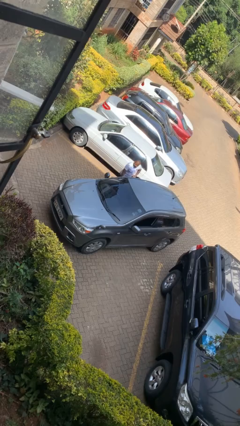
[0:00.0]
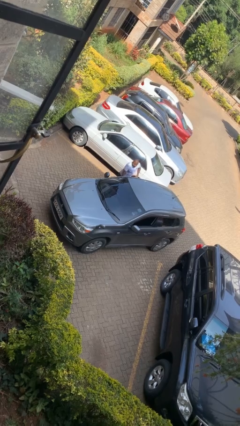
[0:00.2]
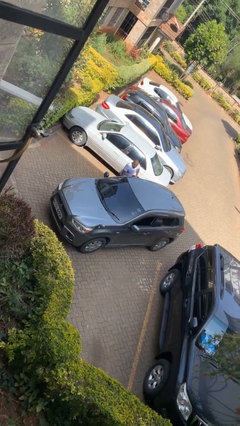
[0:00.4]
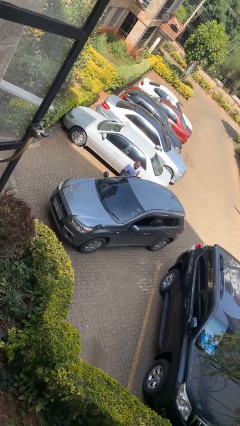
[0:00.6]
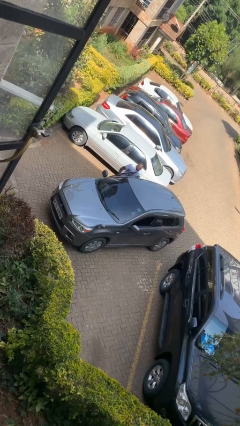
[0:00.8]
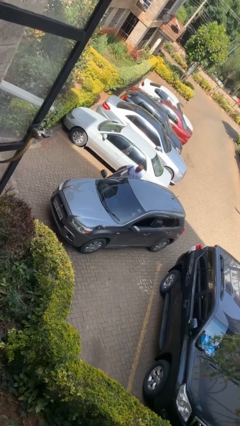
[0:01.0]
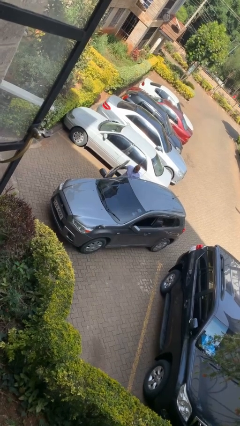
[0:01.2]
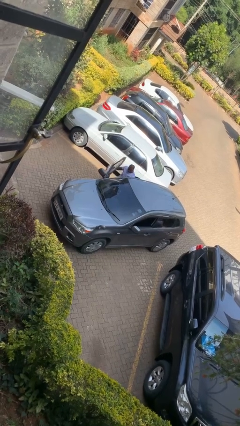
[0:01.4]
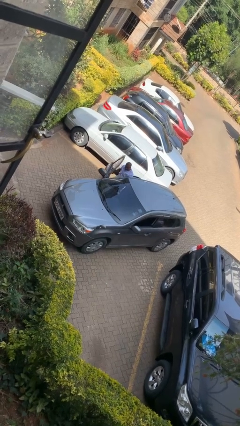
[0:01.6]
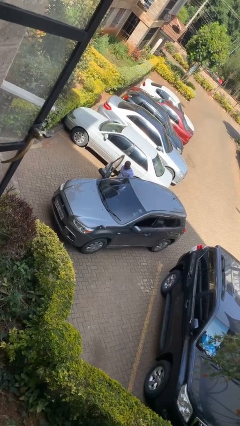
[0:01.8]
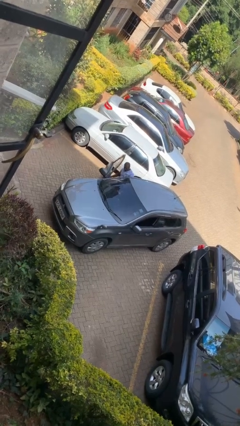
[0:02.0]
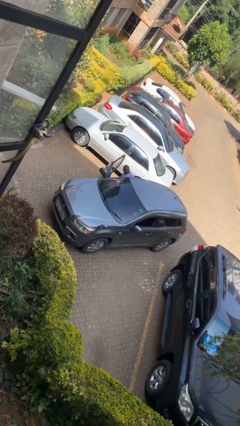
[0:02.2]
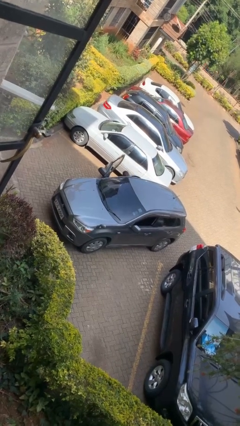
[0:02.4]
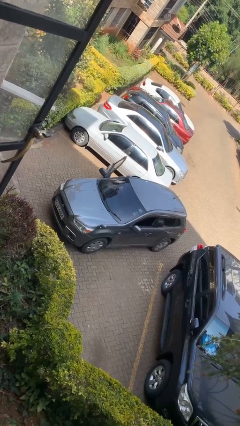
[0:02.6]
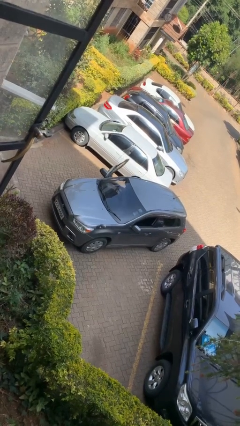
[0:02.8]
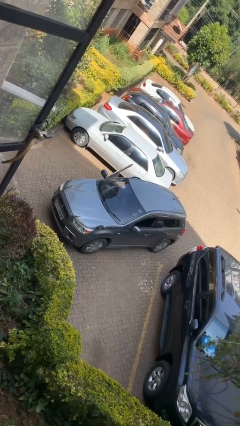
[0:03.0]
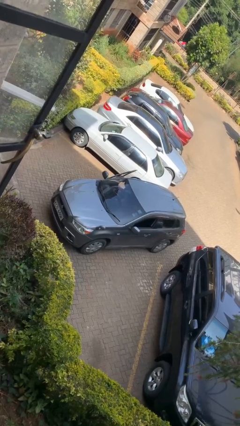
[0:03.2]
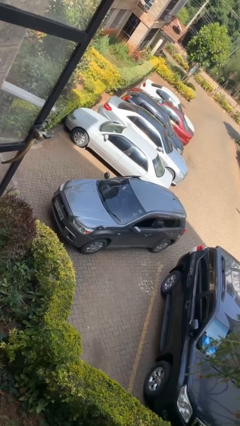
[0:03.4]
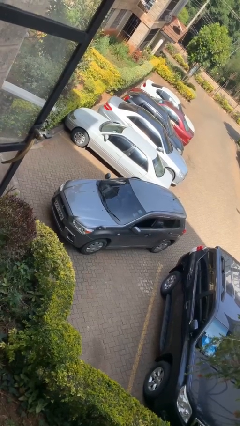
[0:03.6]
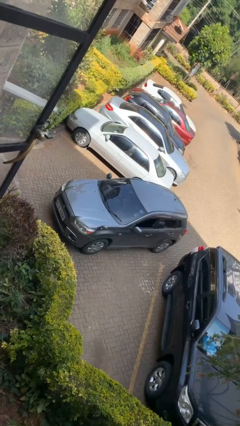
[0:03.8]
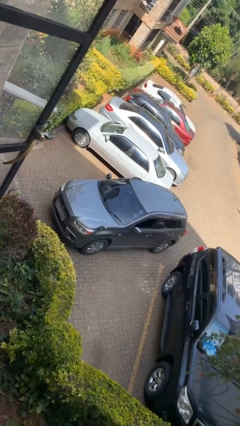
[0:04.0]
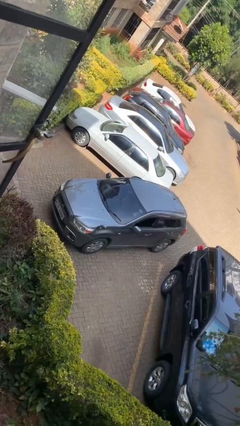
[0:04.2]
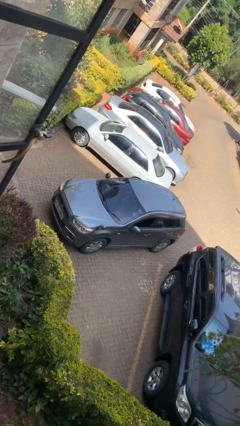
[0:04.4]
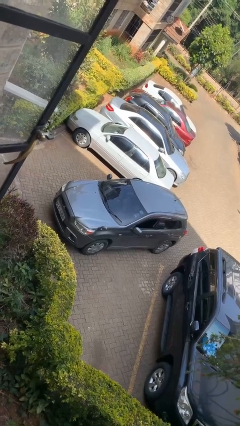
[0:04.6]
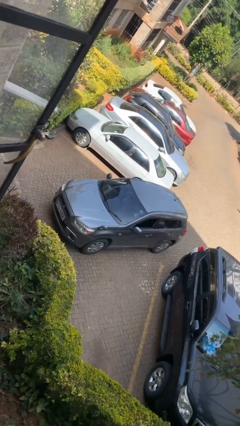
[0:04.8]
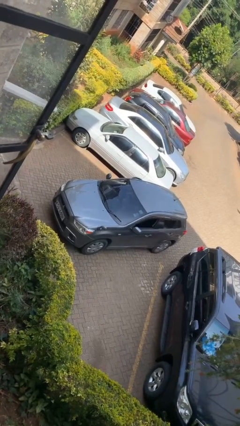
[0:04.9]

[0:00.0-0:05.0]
car picks up person

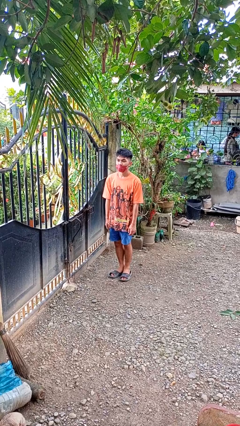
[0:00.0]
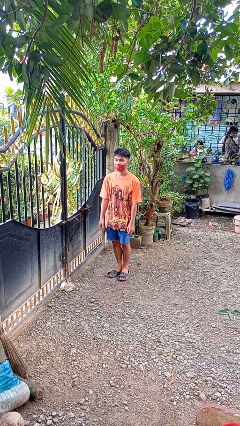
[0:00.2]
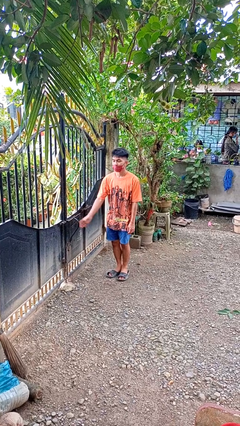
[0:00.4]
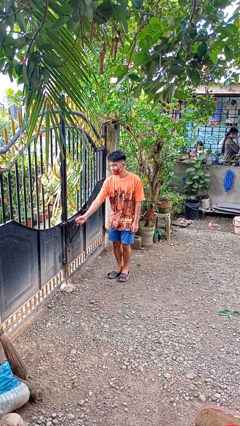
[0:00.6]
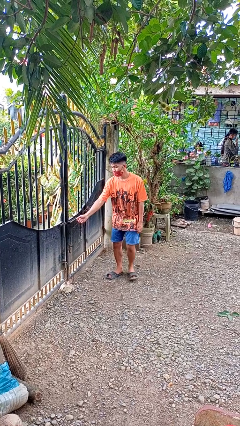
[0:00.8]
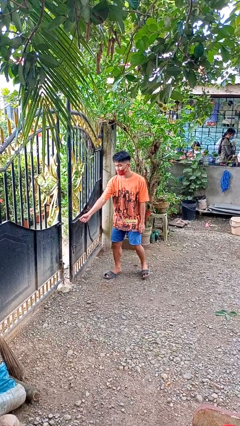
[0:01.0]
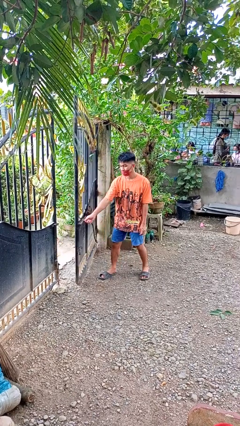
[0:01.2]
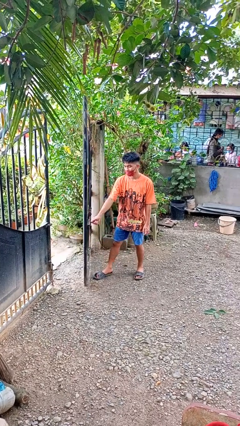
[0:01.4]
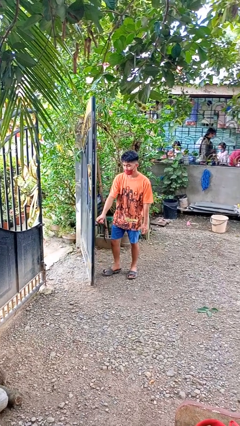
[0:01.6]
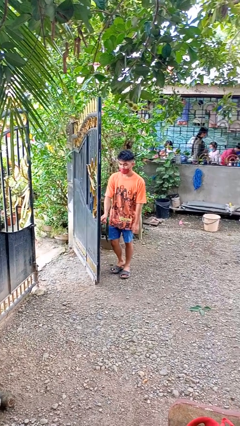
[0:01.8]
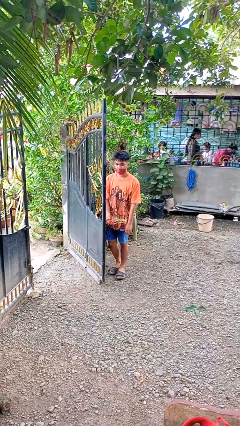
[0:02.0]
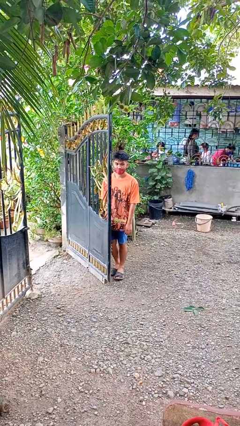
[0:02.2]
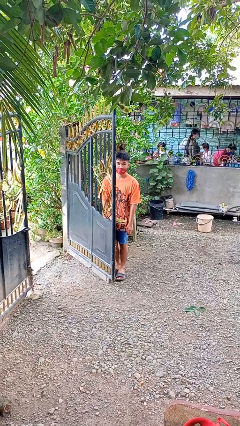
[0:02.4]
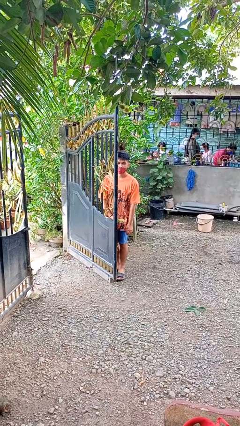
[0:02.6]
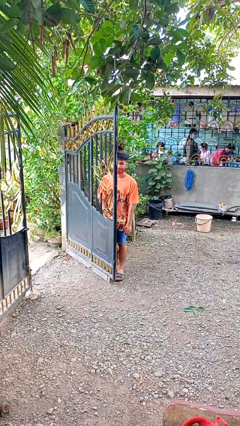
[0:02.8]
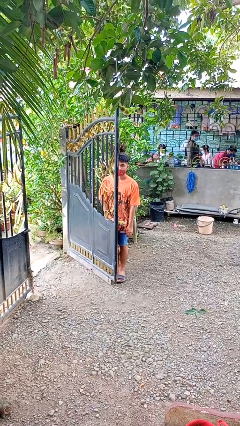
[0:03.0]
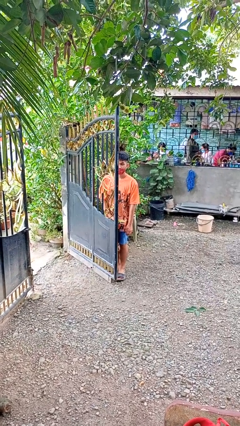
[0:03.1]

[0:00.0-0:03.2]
person opens gate

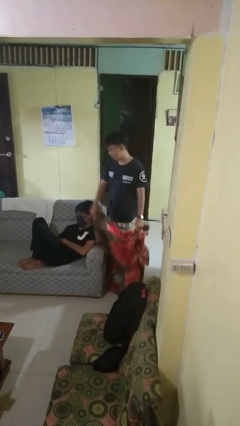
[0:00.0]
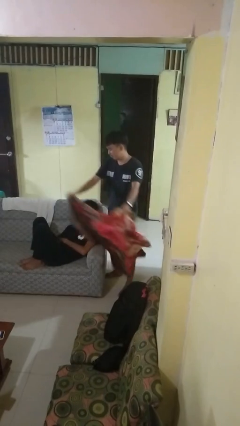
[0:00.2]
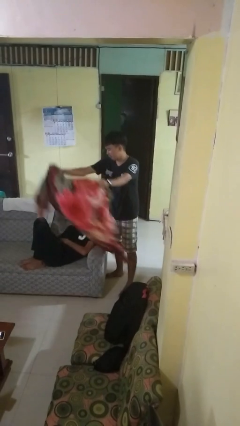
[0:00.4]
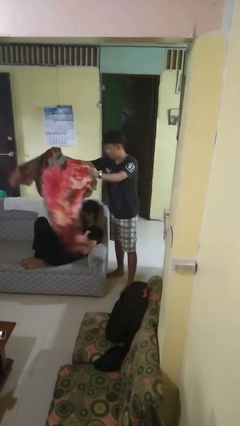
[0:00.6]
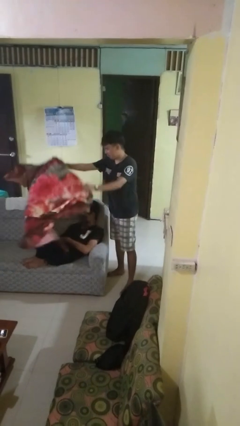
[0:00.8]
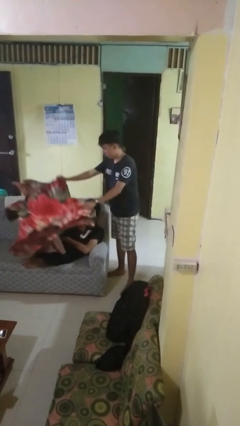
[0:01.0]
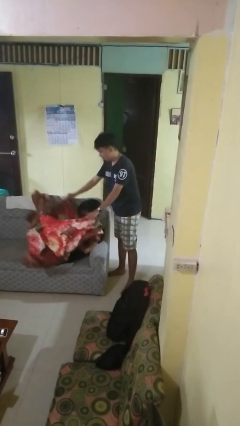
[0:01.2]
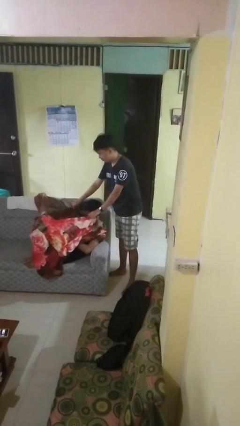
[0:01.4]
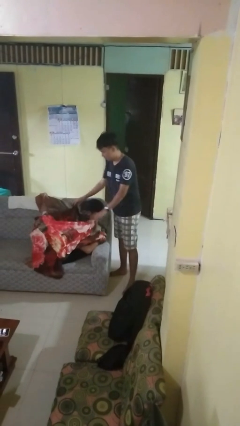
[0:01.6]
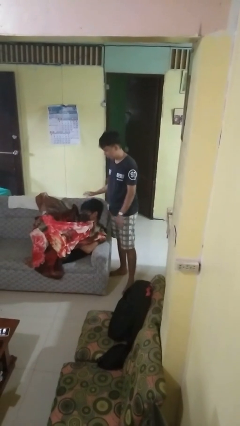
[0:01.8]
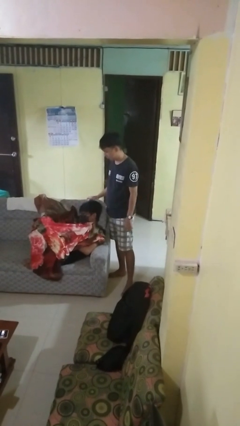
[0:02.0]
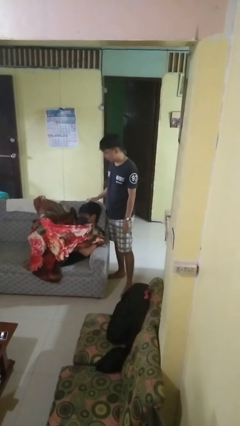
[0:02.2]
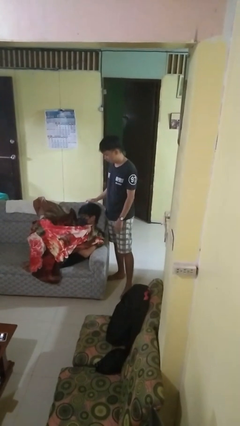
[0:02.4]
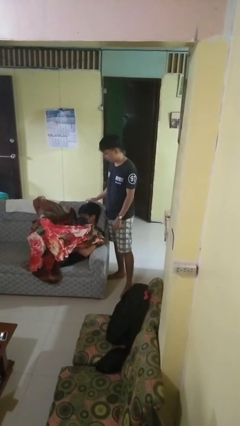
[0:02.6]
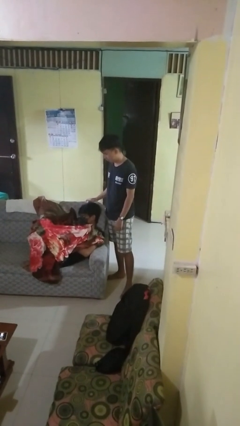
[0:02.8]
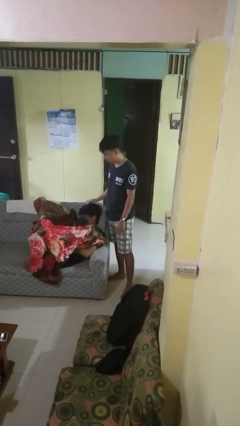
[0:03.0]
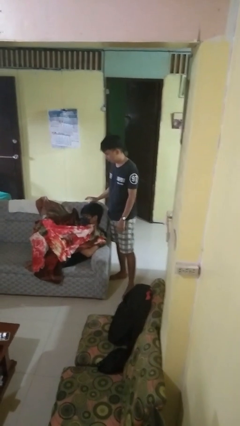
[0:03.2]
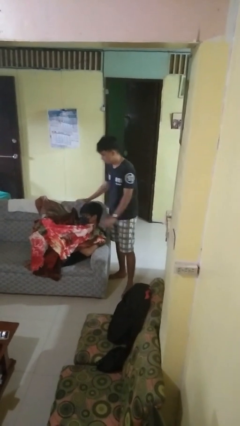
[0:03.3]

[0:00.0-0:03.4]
person covers friend with blanket

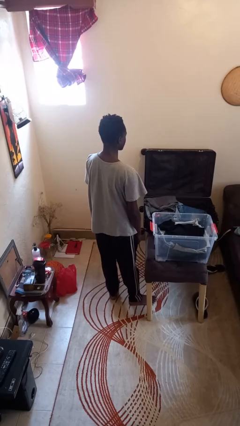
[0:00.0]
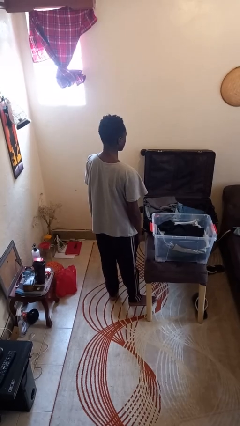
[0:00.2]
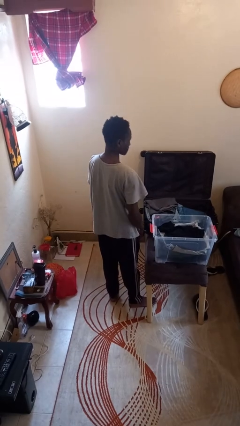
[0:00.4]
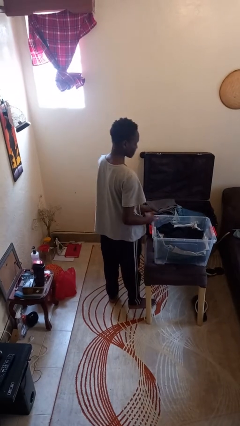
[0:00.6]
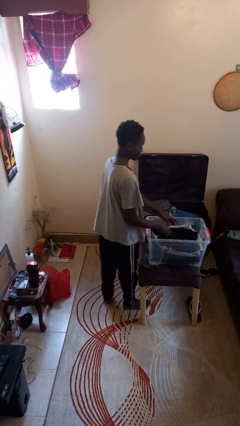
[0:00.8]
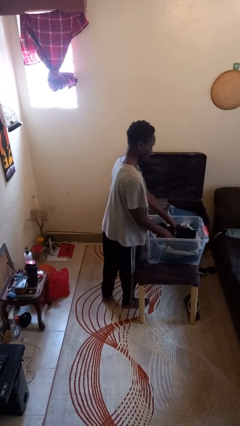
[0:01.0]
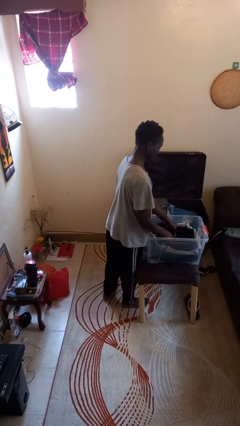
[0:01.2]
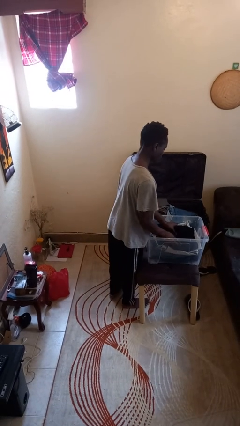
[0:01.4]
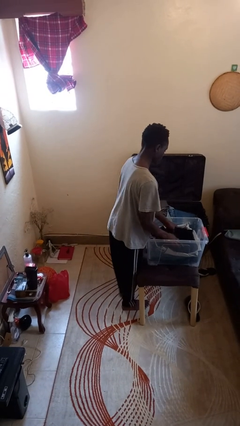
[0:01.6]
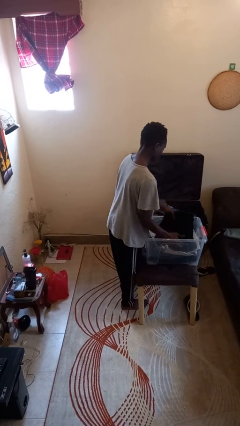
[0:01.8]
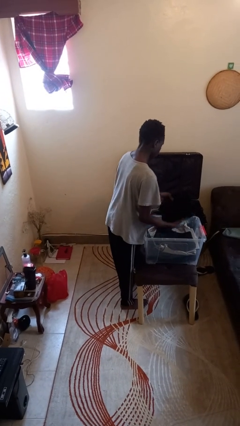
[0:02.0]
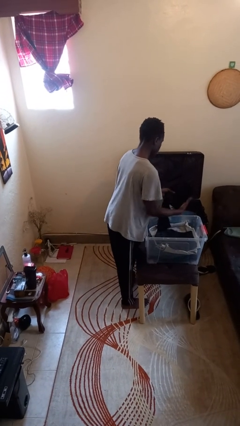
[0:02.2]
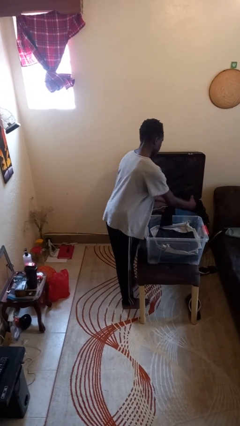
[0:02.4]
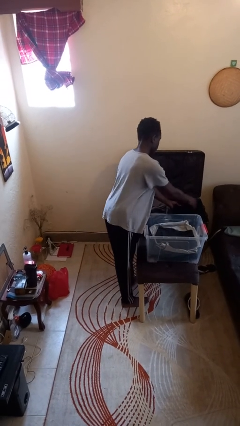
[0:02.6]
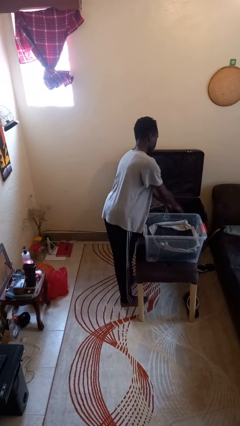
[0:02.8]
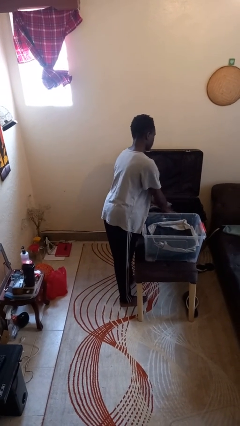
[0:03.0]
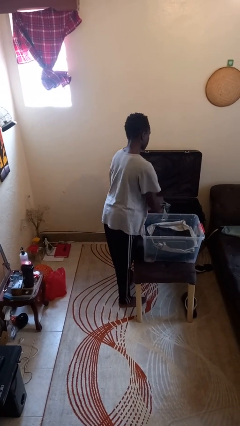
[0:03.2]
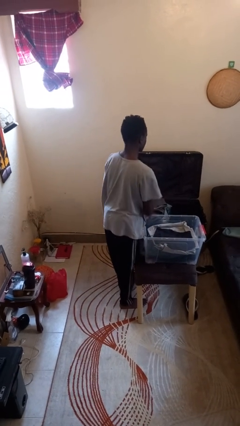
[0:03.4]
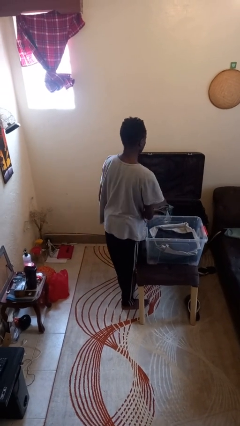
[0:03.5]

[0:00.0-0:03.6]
person loads clothes into suitcase

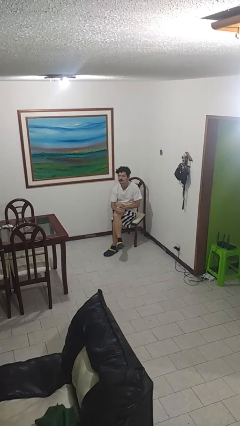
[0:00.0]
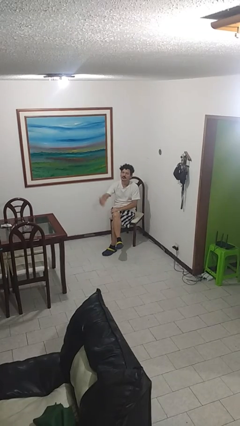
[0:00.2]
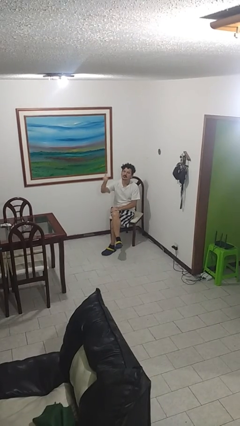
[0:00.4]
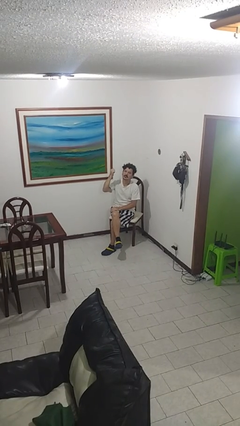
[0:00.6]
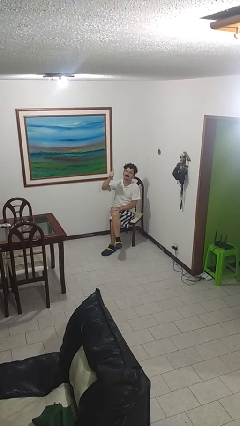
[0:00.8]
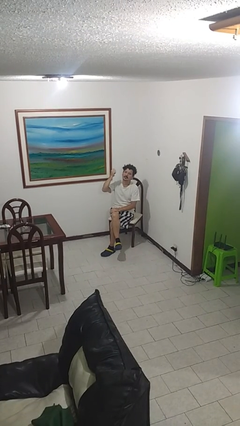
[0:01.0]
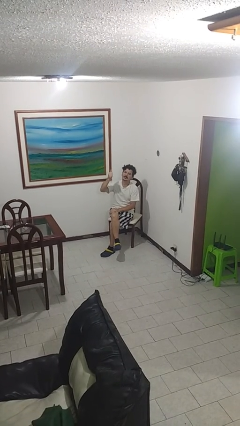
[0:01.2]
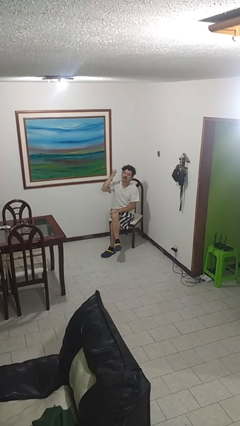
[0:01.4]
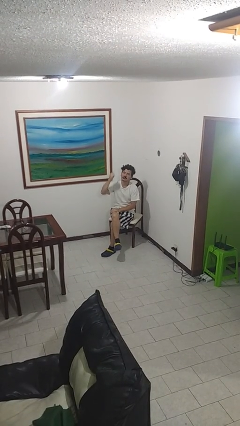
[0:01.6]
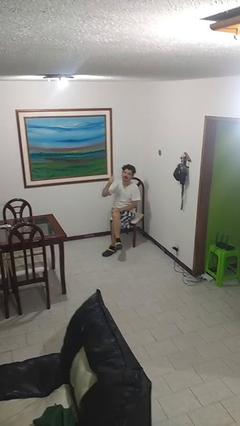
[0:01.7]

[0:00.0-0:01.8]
person gestures behind me

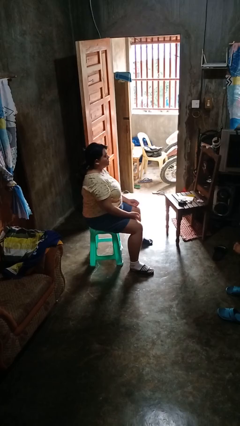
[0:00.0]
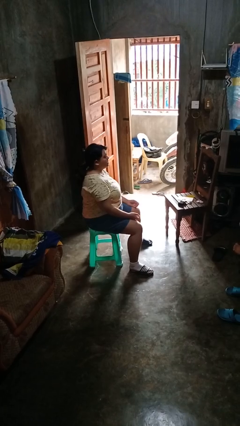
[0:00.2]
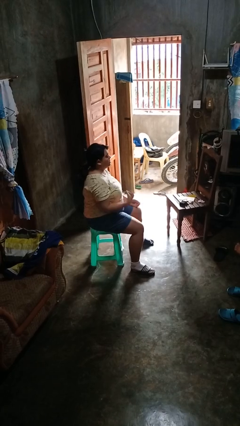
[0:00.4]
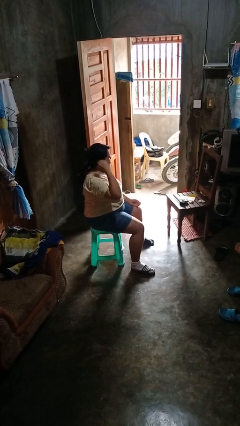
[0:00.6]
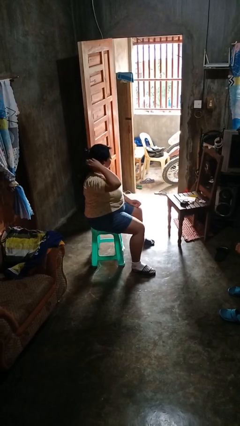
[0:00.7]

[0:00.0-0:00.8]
person takes off hairtie
